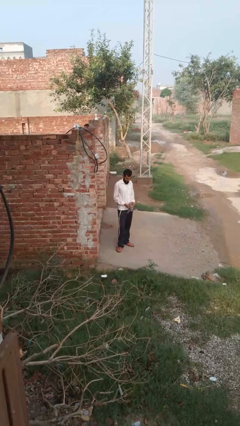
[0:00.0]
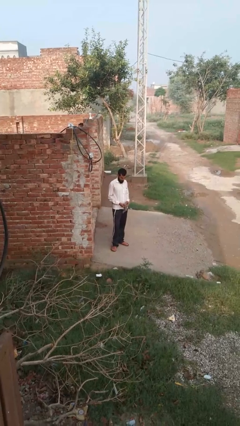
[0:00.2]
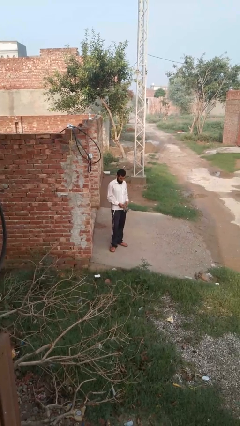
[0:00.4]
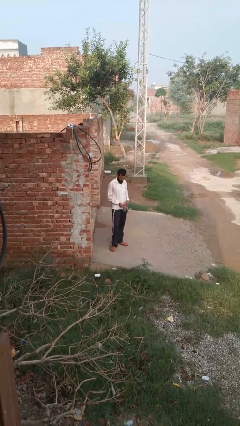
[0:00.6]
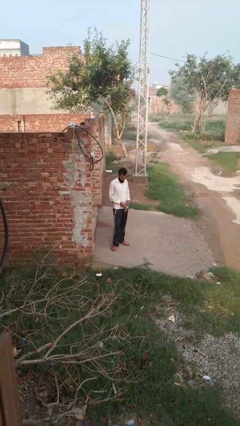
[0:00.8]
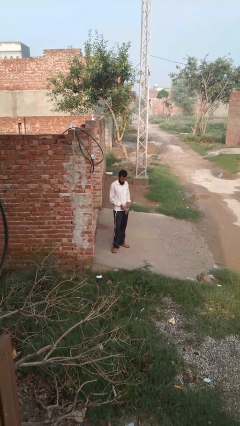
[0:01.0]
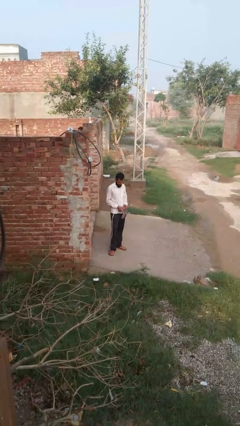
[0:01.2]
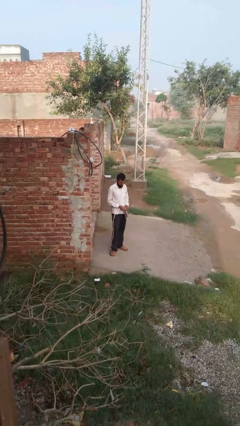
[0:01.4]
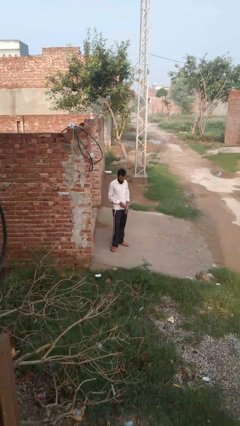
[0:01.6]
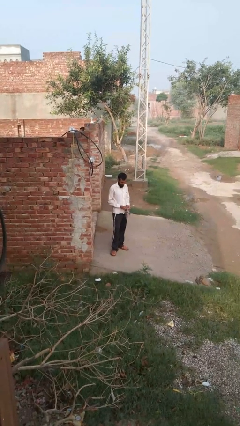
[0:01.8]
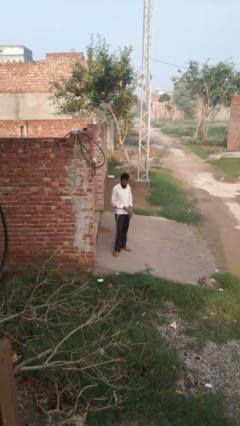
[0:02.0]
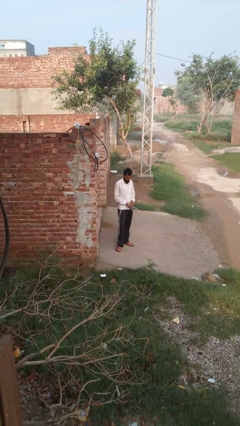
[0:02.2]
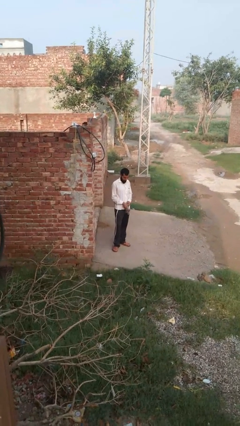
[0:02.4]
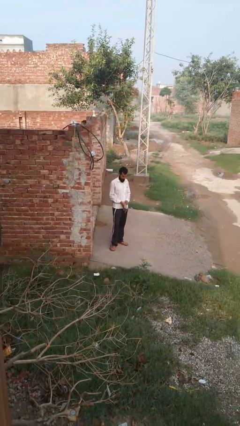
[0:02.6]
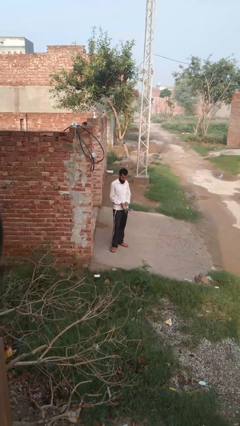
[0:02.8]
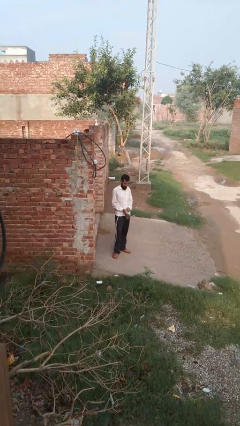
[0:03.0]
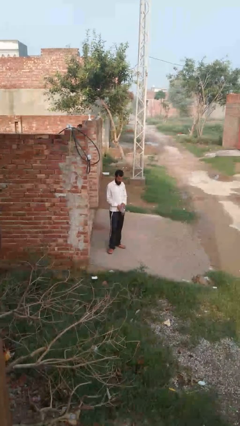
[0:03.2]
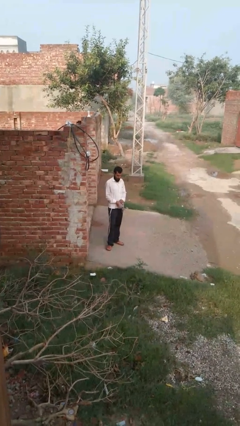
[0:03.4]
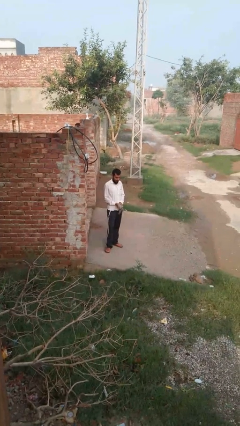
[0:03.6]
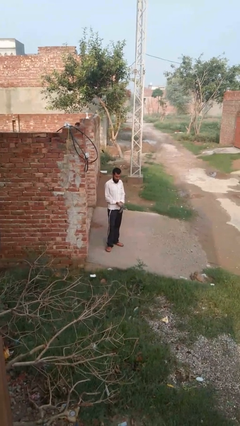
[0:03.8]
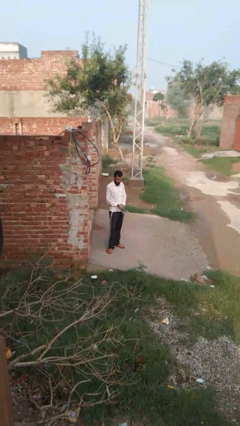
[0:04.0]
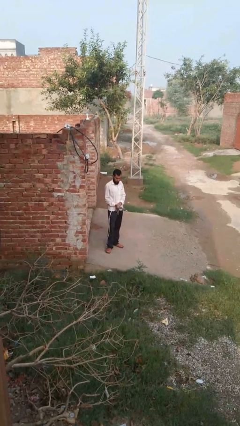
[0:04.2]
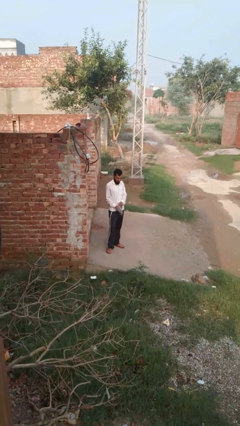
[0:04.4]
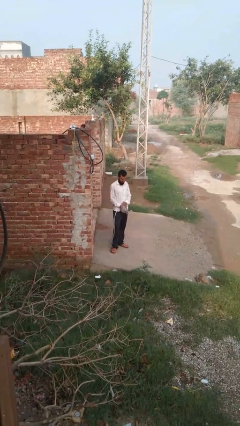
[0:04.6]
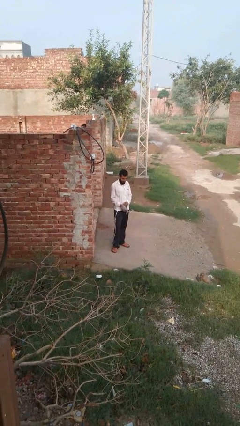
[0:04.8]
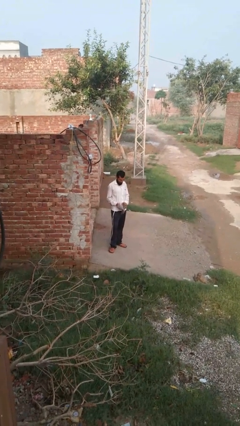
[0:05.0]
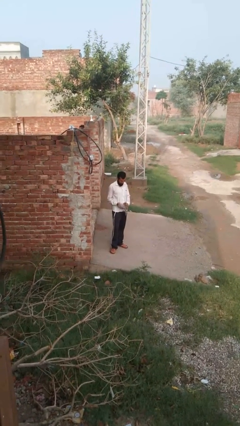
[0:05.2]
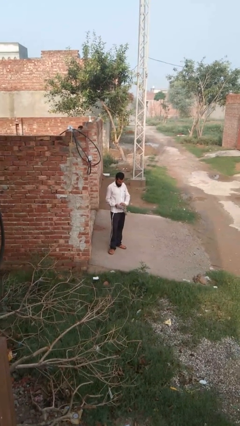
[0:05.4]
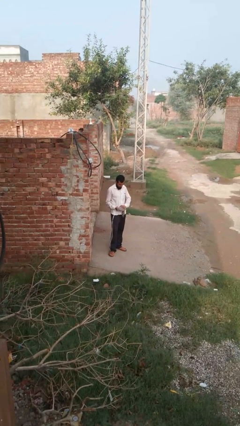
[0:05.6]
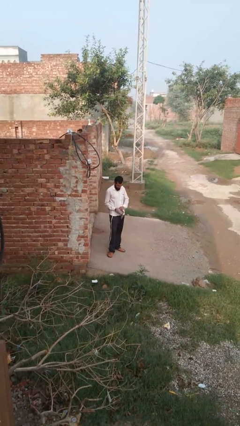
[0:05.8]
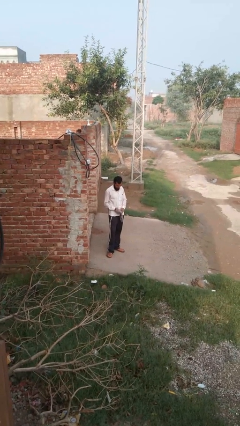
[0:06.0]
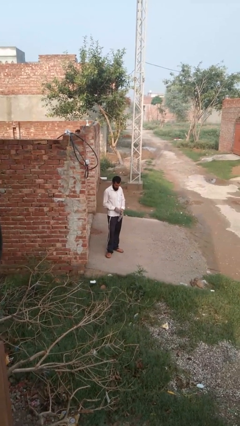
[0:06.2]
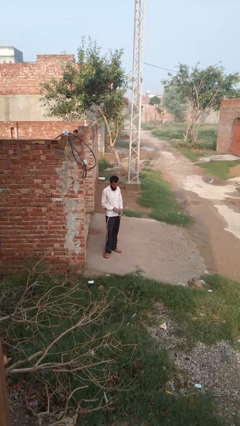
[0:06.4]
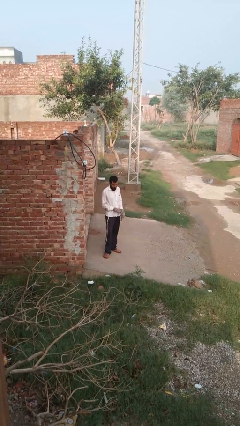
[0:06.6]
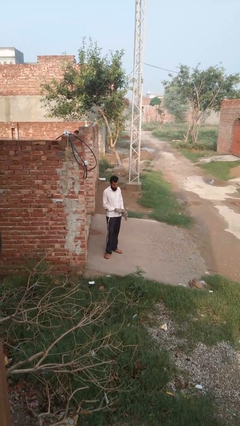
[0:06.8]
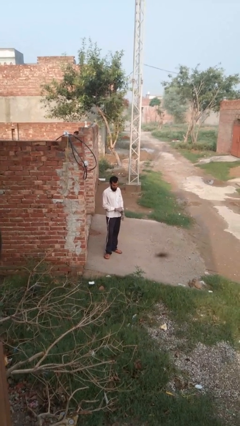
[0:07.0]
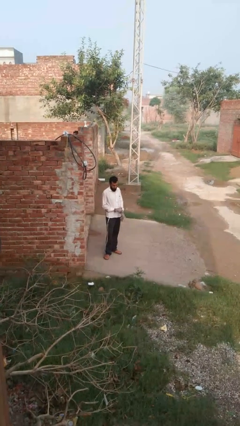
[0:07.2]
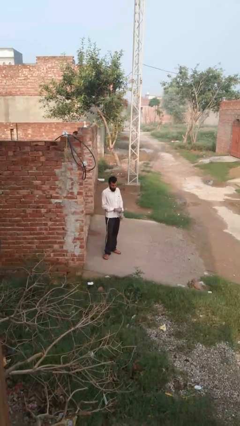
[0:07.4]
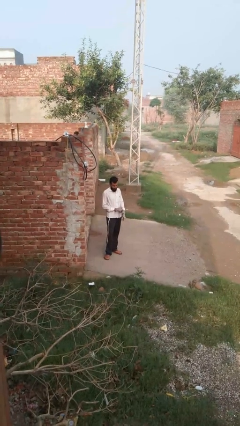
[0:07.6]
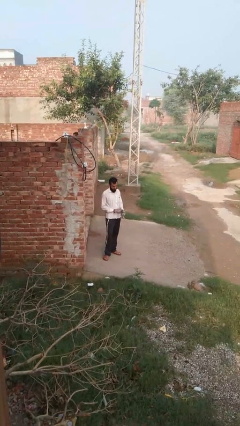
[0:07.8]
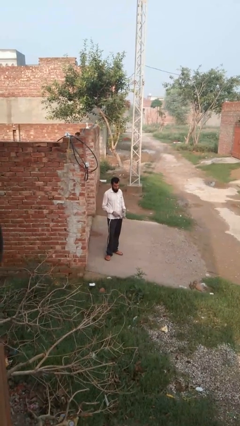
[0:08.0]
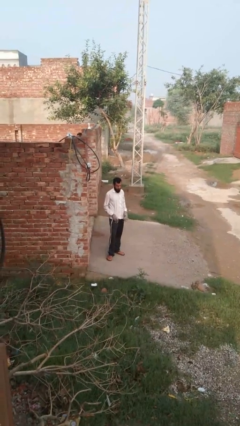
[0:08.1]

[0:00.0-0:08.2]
person puts on gloves

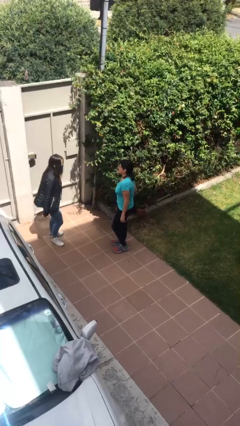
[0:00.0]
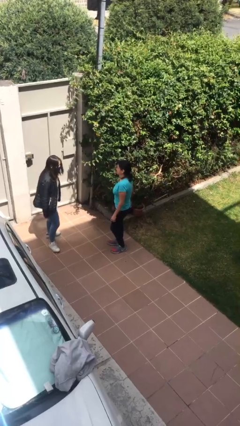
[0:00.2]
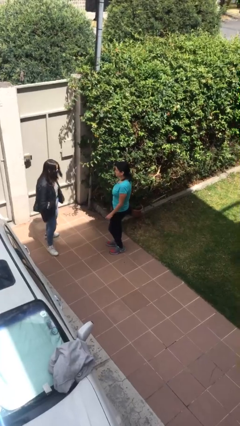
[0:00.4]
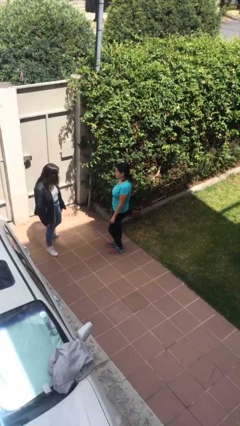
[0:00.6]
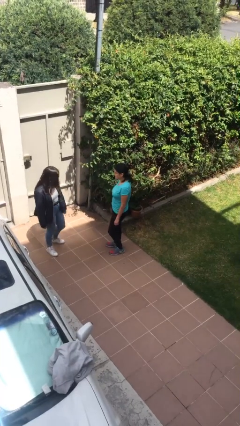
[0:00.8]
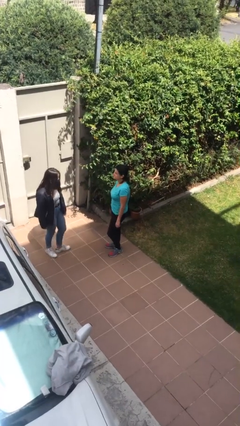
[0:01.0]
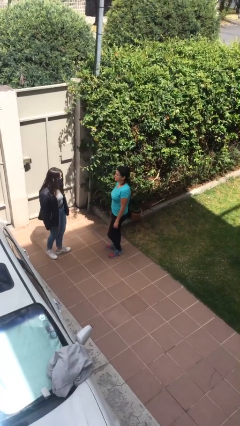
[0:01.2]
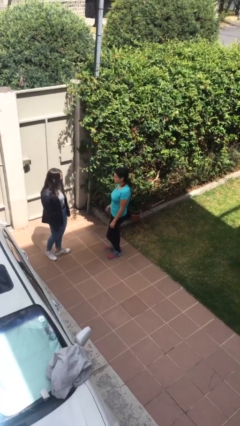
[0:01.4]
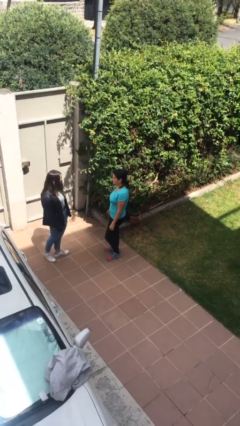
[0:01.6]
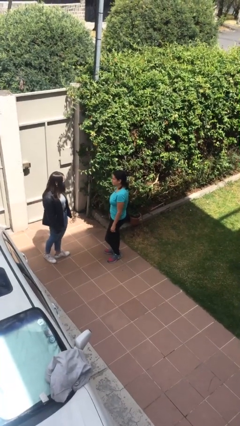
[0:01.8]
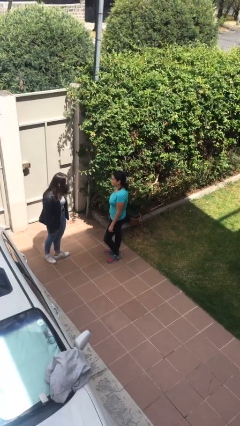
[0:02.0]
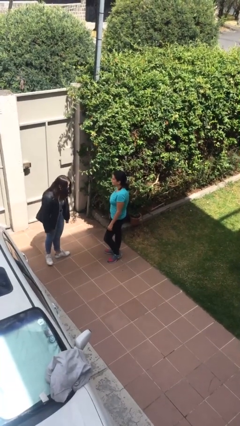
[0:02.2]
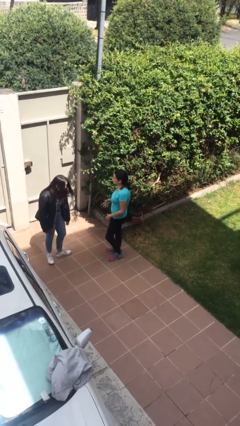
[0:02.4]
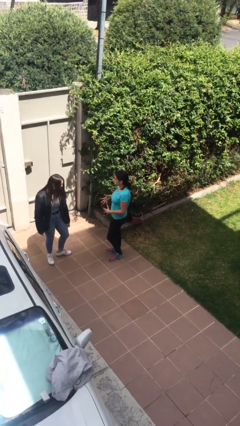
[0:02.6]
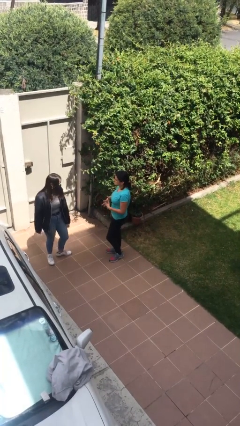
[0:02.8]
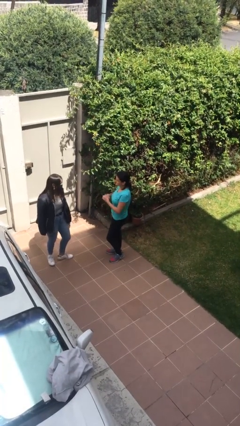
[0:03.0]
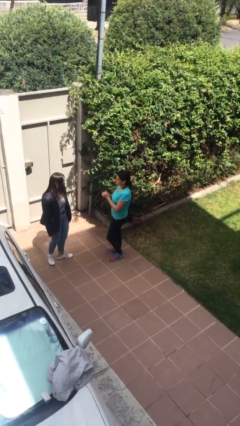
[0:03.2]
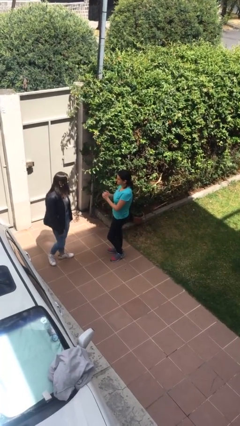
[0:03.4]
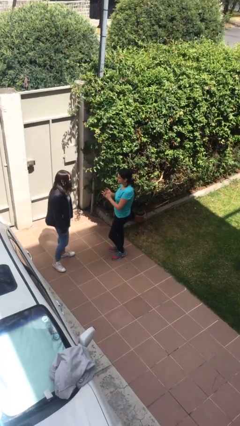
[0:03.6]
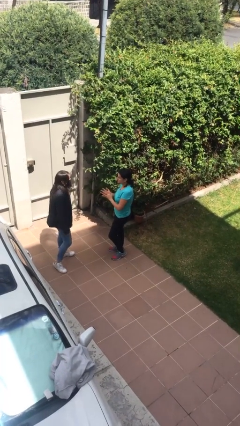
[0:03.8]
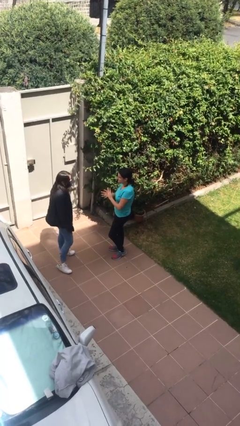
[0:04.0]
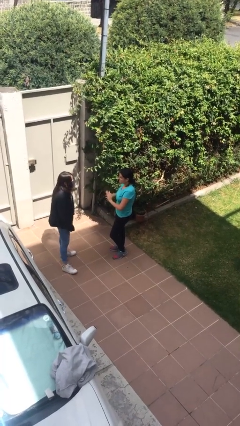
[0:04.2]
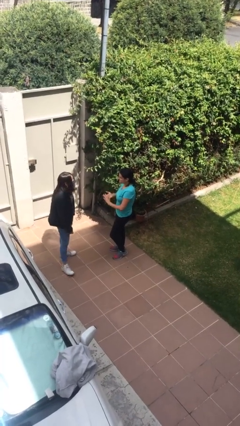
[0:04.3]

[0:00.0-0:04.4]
person talks to person

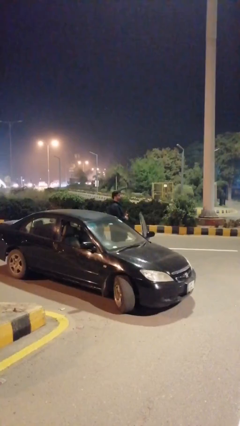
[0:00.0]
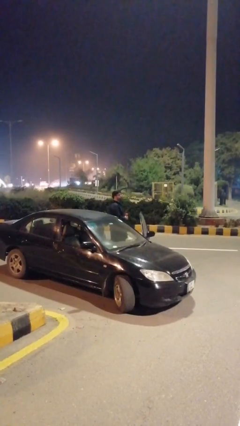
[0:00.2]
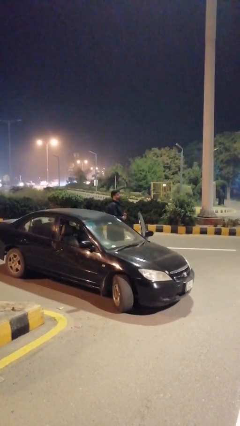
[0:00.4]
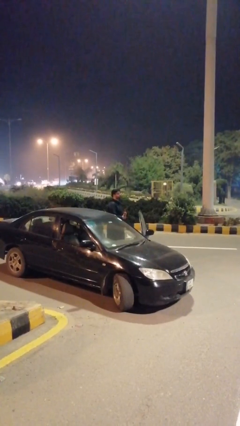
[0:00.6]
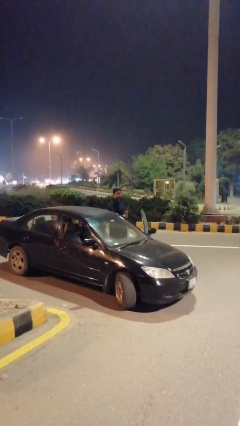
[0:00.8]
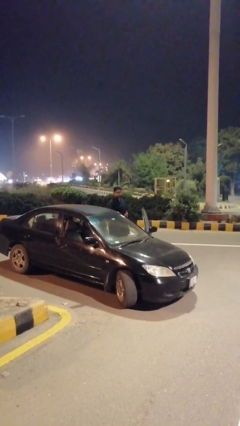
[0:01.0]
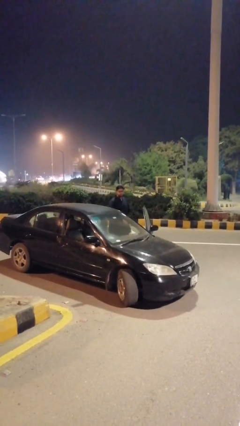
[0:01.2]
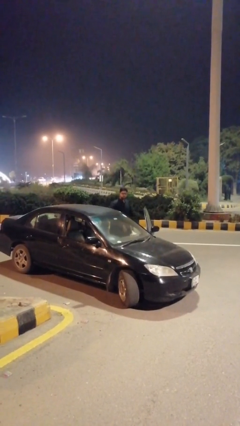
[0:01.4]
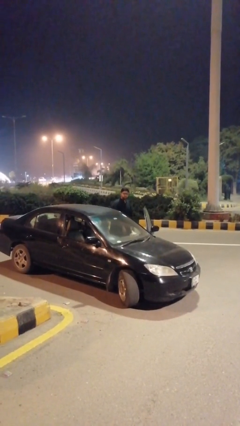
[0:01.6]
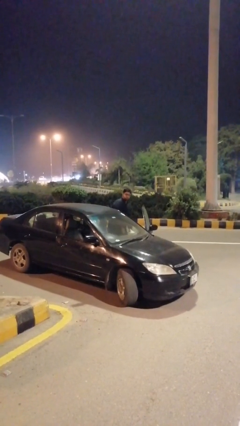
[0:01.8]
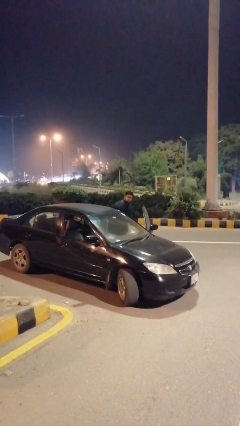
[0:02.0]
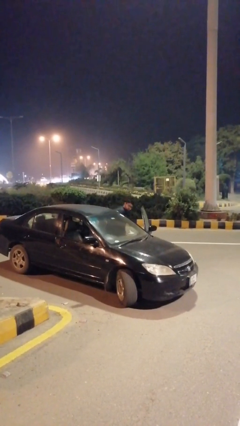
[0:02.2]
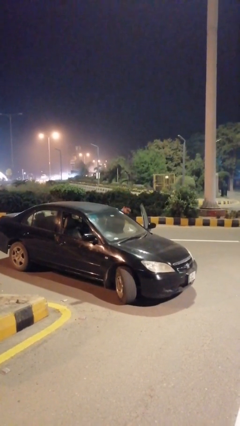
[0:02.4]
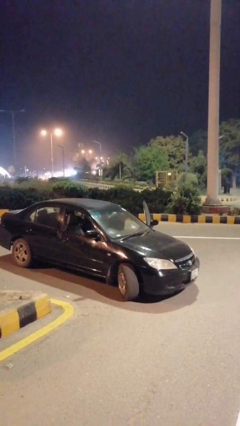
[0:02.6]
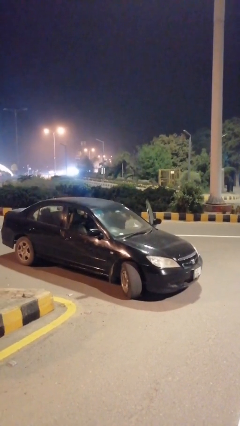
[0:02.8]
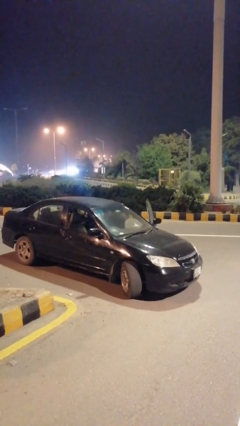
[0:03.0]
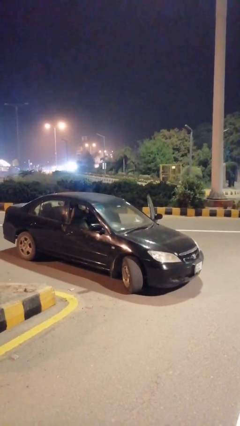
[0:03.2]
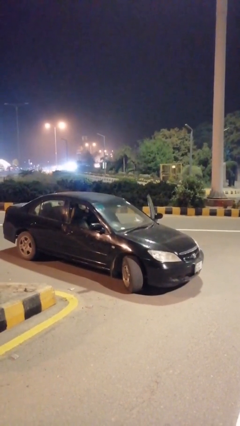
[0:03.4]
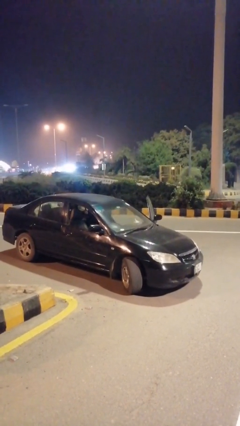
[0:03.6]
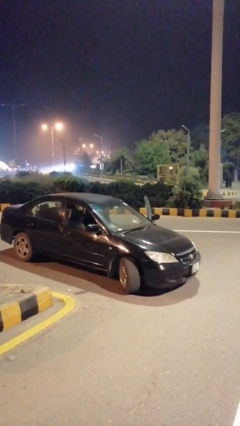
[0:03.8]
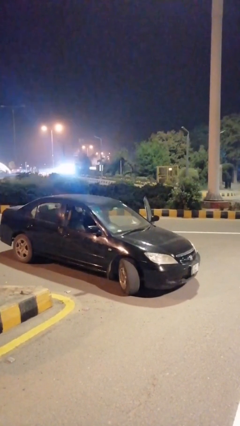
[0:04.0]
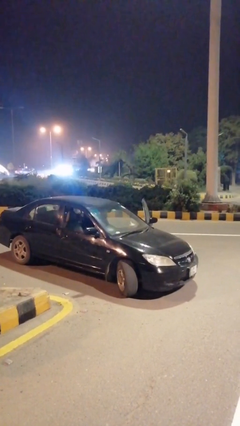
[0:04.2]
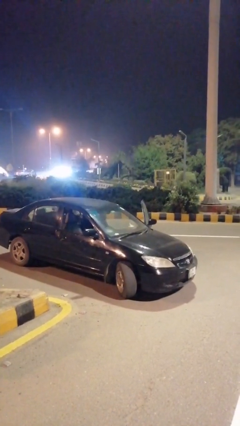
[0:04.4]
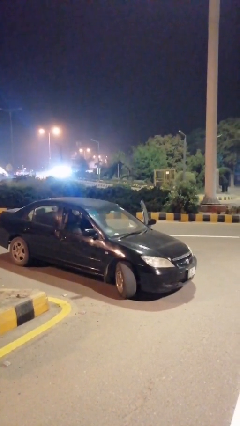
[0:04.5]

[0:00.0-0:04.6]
person enters car

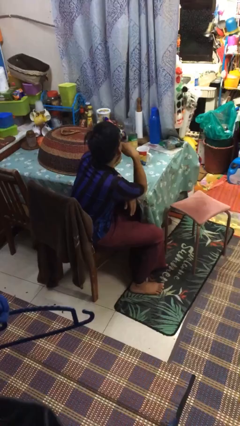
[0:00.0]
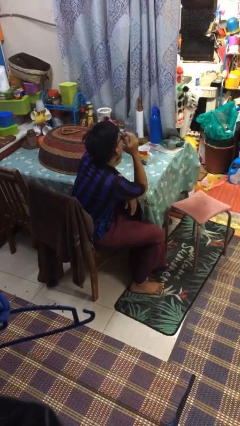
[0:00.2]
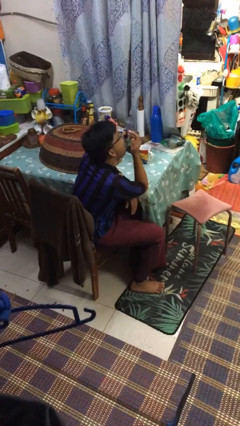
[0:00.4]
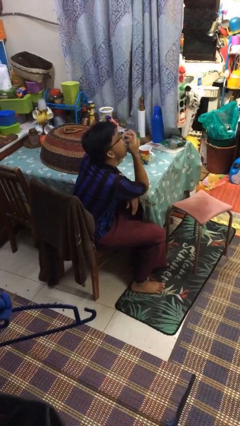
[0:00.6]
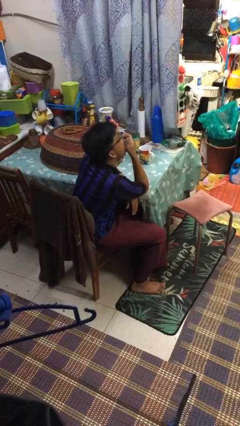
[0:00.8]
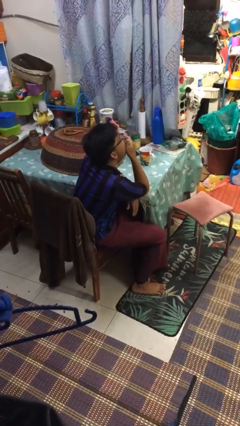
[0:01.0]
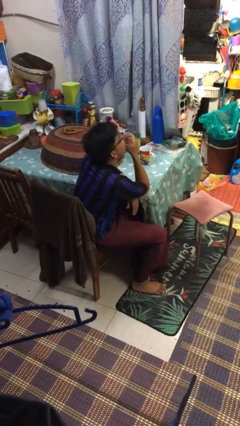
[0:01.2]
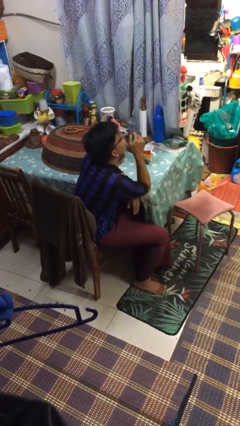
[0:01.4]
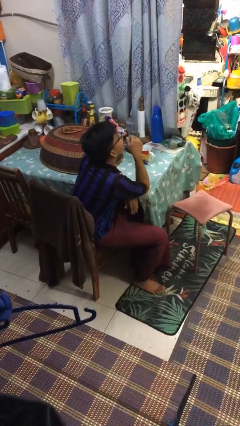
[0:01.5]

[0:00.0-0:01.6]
person yawns
